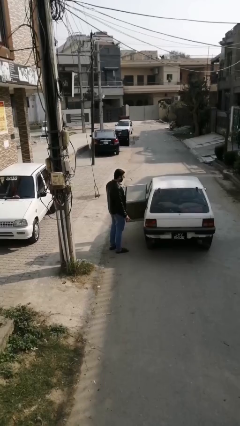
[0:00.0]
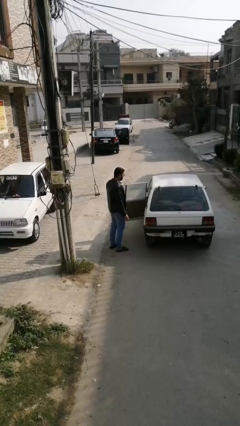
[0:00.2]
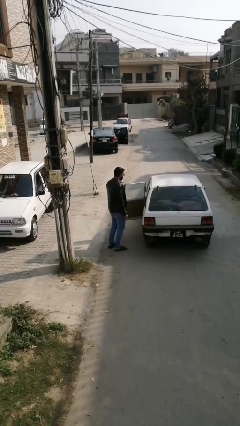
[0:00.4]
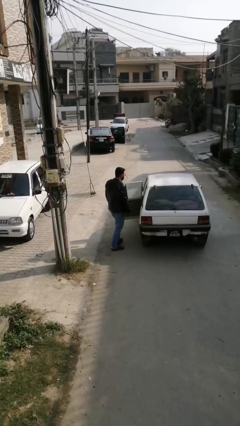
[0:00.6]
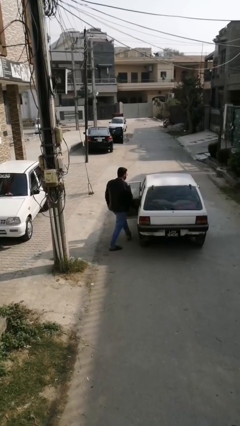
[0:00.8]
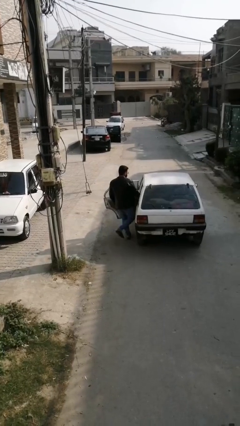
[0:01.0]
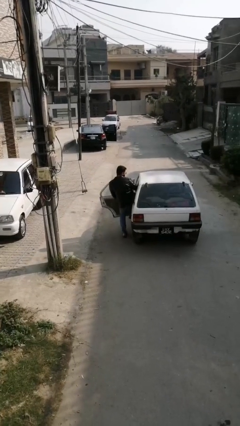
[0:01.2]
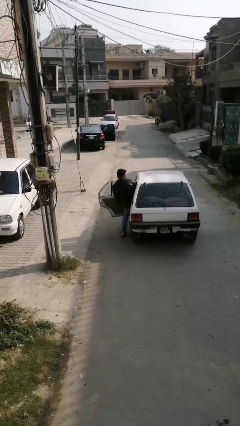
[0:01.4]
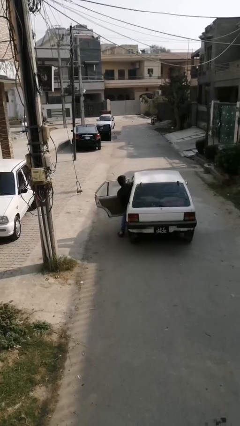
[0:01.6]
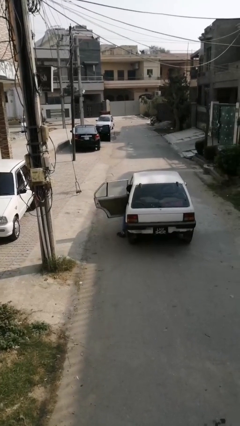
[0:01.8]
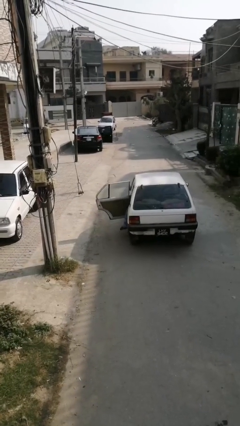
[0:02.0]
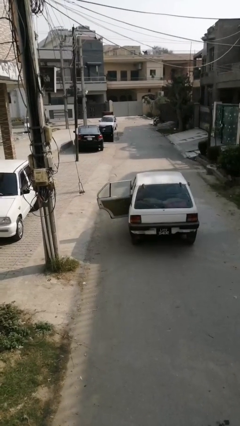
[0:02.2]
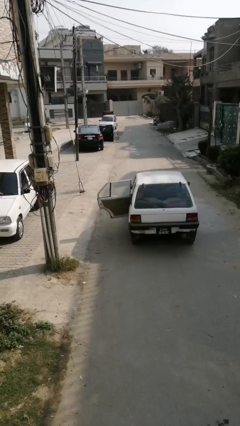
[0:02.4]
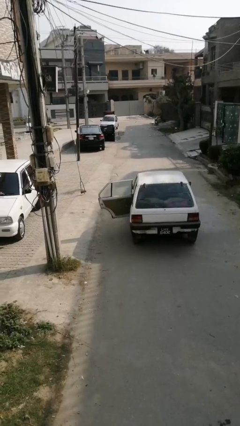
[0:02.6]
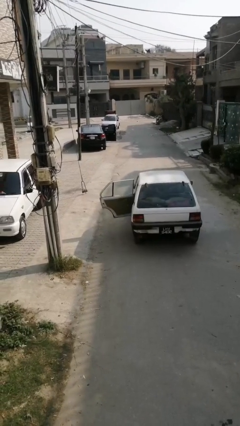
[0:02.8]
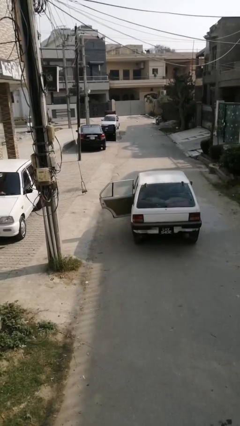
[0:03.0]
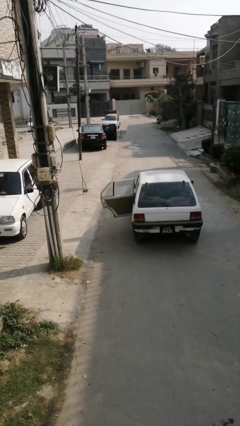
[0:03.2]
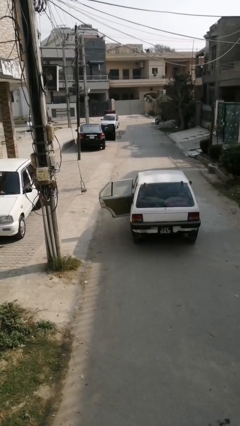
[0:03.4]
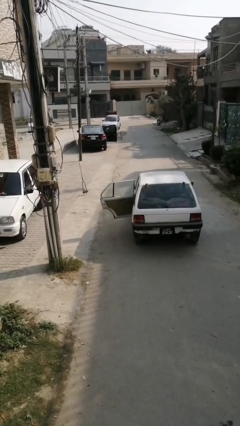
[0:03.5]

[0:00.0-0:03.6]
person enters car

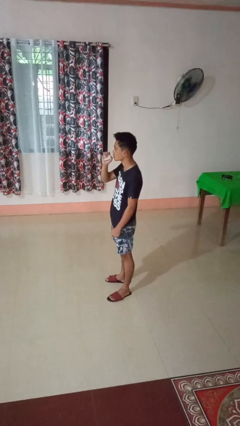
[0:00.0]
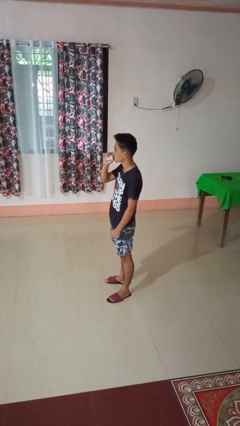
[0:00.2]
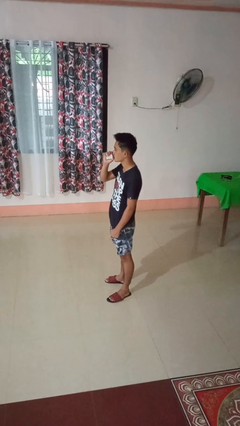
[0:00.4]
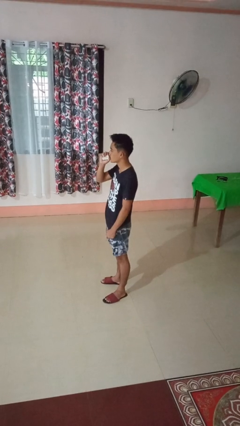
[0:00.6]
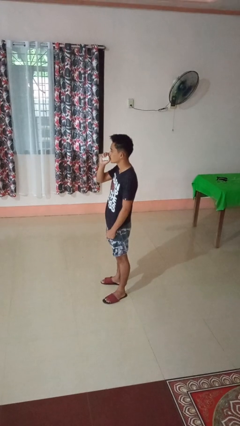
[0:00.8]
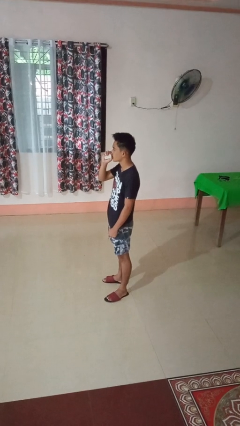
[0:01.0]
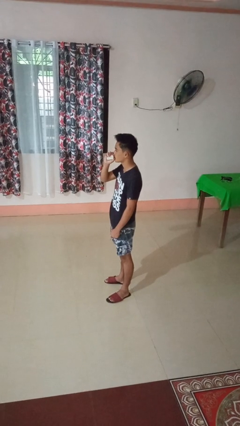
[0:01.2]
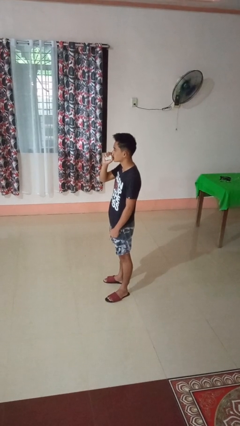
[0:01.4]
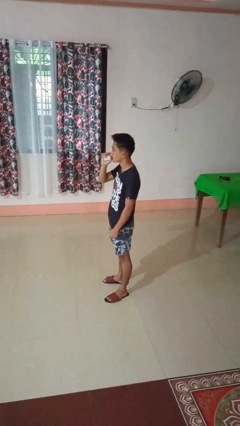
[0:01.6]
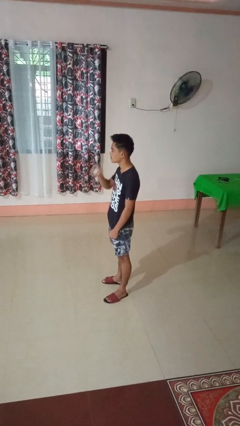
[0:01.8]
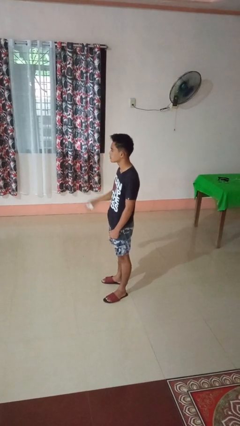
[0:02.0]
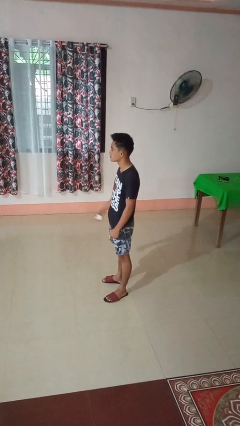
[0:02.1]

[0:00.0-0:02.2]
person vapes

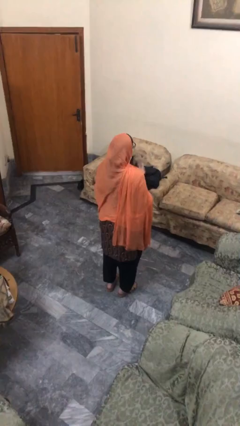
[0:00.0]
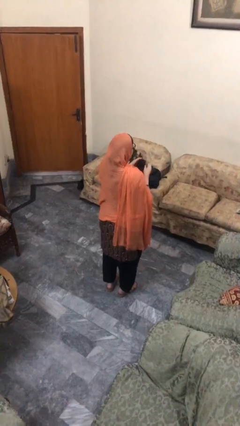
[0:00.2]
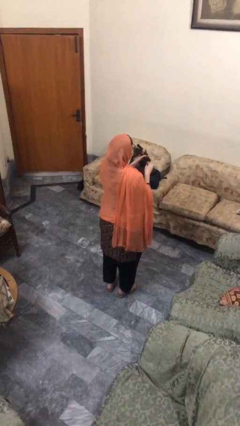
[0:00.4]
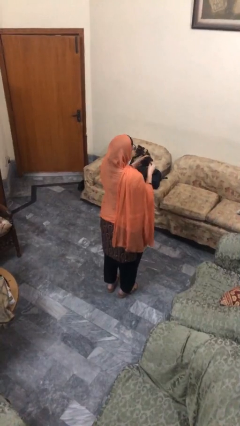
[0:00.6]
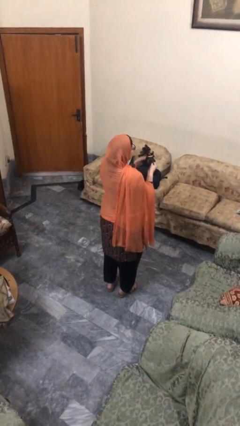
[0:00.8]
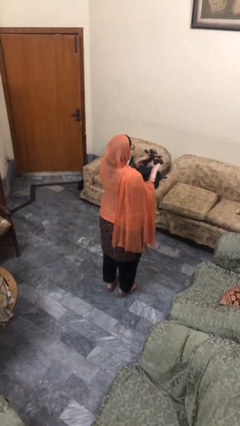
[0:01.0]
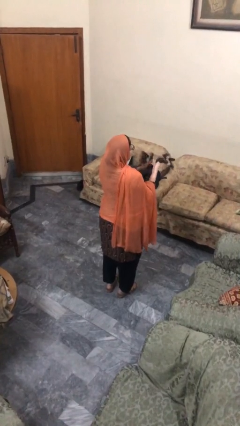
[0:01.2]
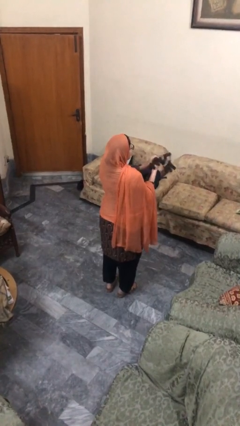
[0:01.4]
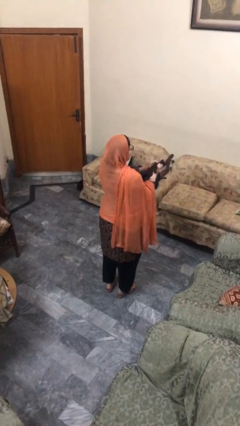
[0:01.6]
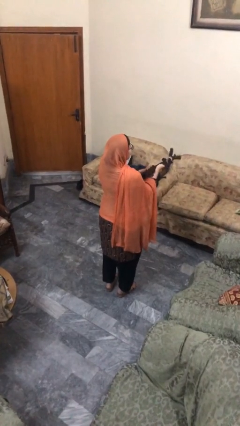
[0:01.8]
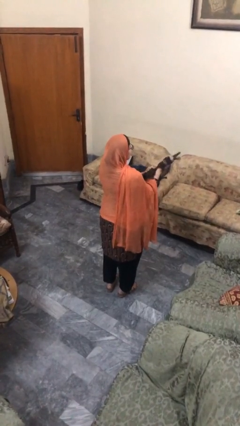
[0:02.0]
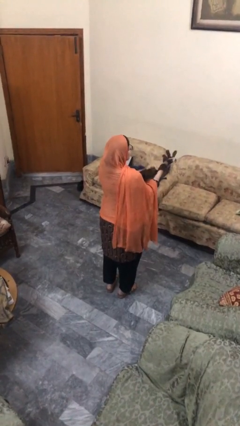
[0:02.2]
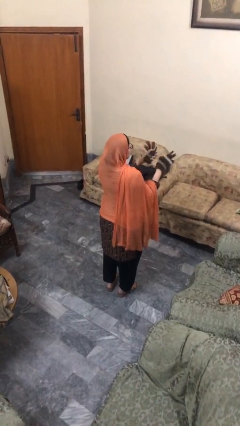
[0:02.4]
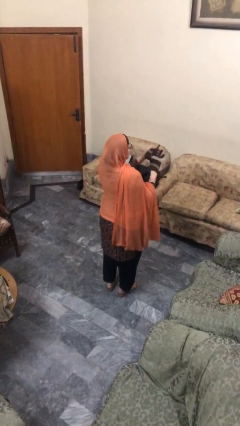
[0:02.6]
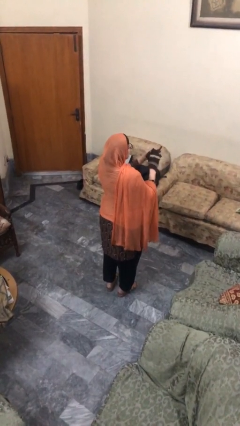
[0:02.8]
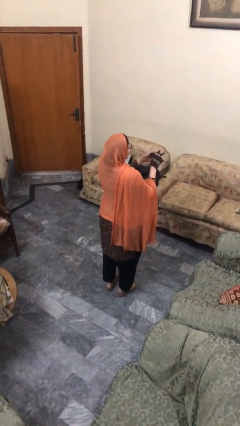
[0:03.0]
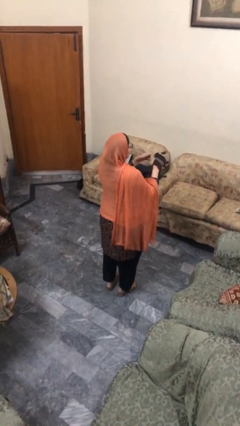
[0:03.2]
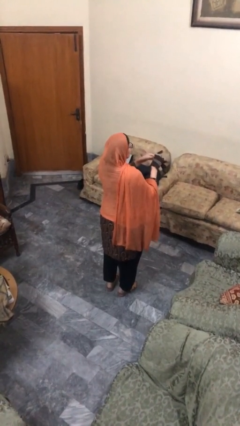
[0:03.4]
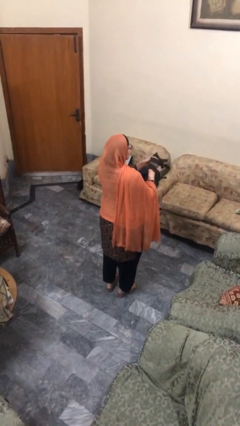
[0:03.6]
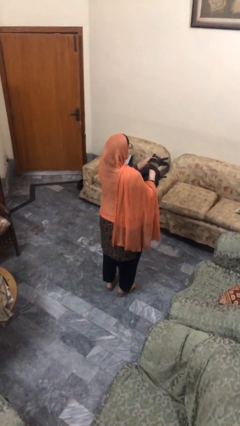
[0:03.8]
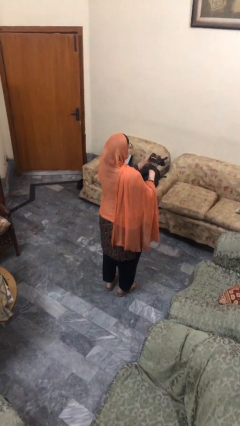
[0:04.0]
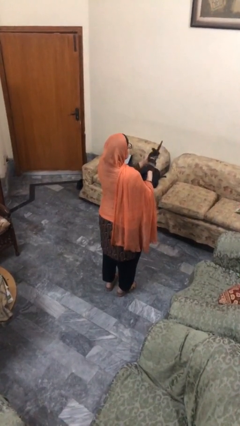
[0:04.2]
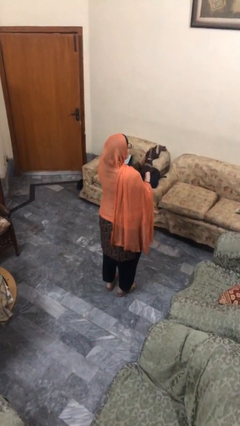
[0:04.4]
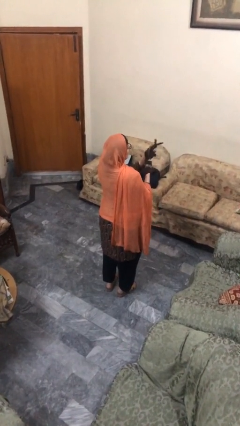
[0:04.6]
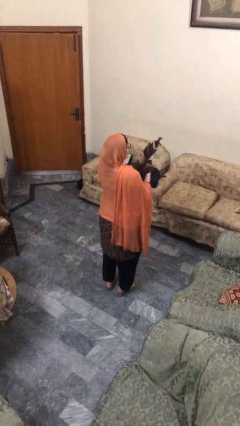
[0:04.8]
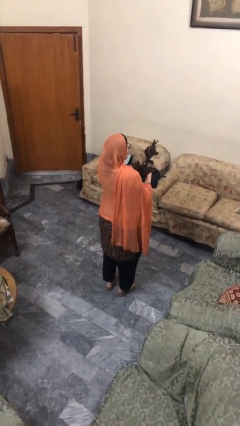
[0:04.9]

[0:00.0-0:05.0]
person puts on gloves

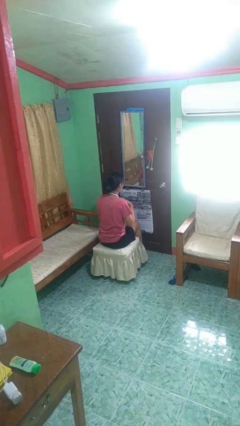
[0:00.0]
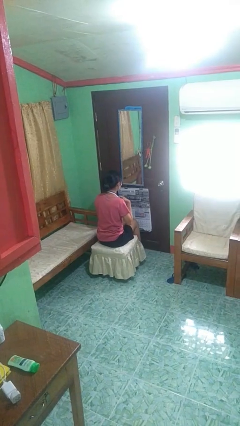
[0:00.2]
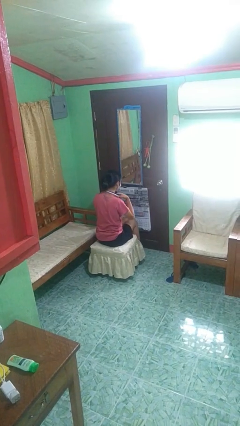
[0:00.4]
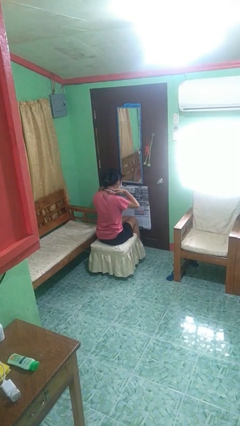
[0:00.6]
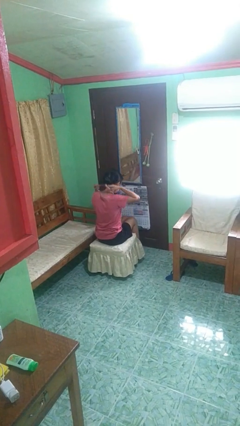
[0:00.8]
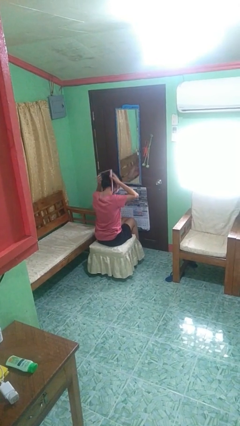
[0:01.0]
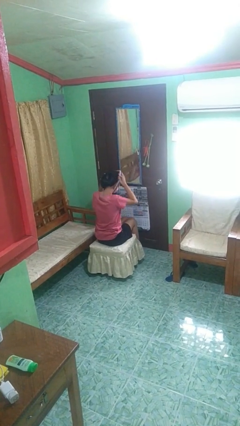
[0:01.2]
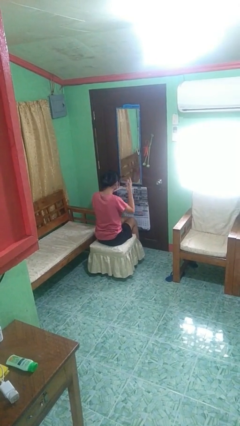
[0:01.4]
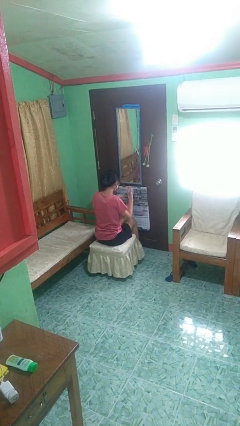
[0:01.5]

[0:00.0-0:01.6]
person takes off necklace

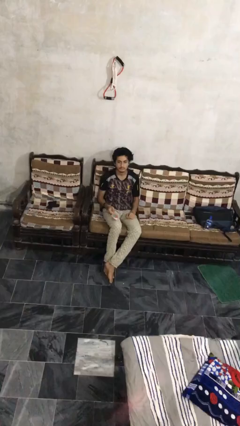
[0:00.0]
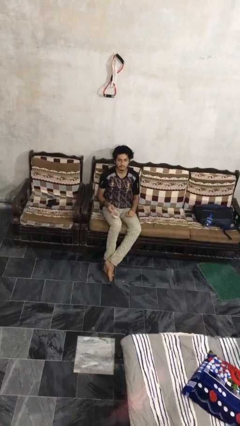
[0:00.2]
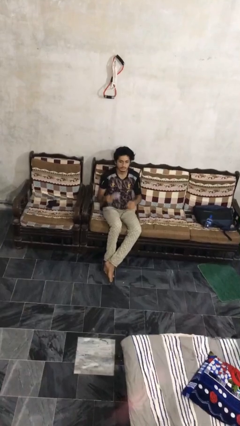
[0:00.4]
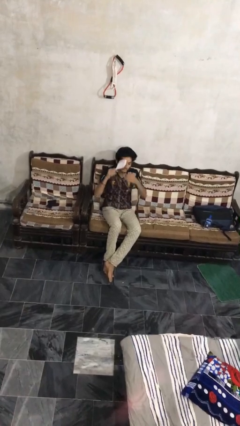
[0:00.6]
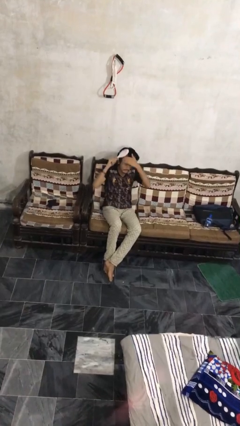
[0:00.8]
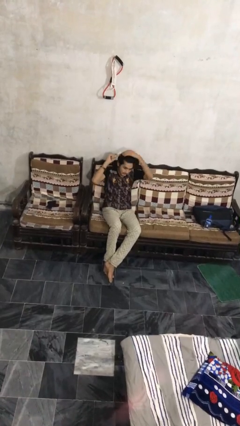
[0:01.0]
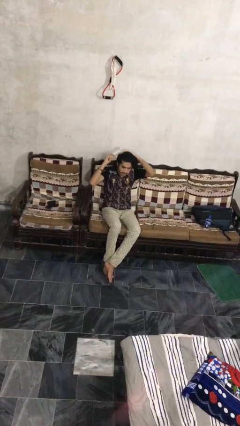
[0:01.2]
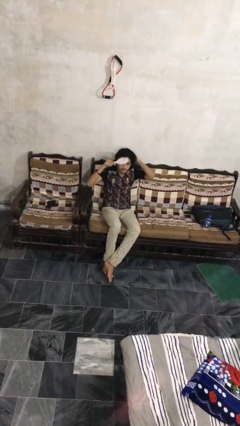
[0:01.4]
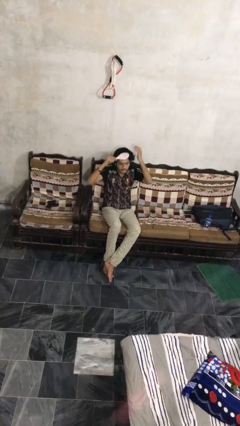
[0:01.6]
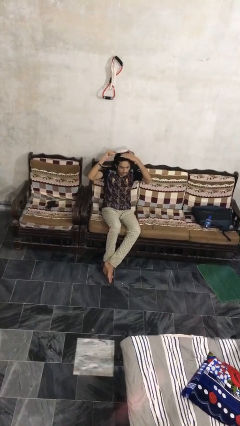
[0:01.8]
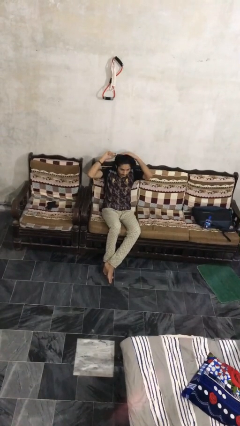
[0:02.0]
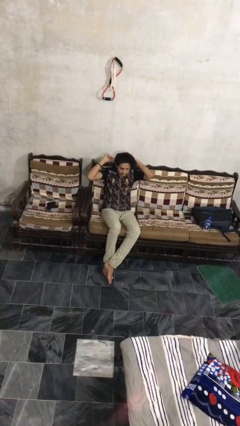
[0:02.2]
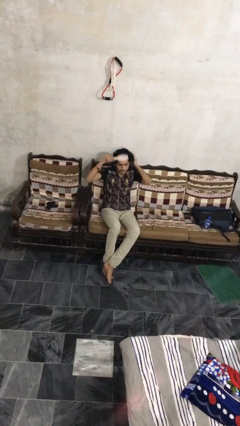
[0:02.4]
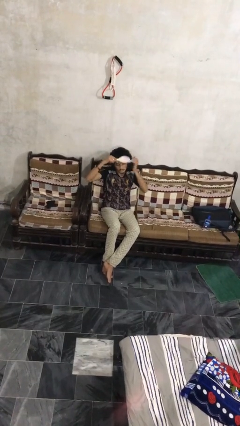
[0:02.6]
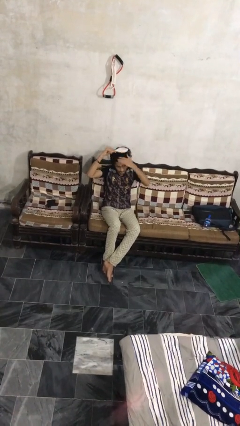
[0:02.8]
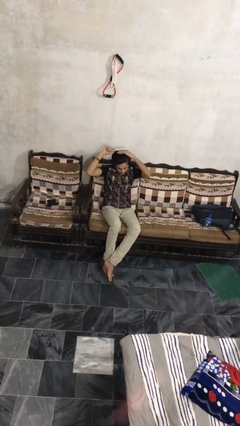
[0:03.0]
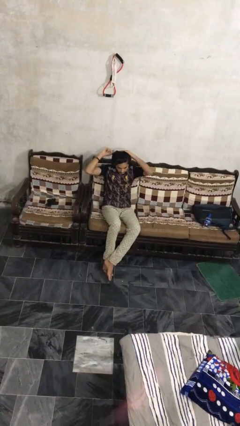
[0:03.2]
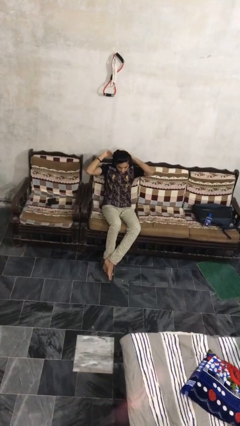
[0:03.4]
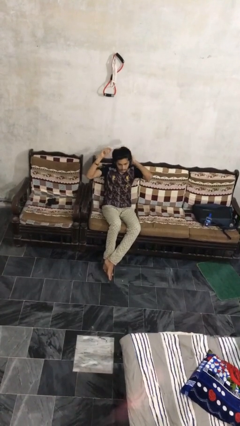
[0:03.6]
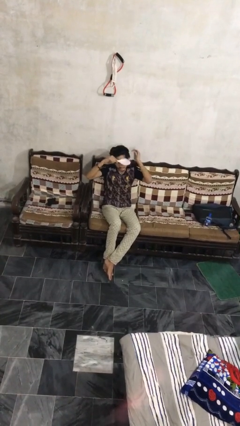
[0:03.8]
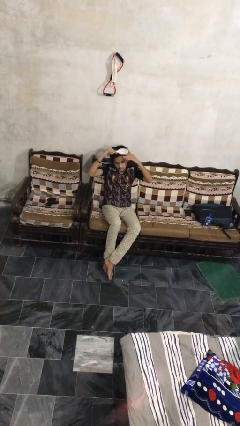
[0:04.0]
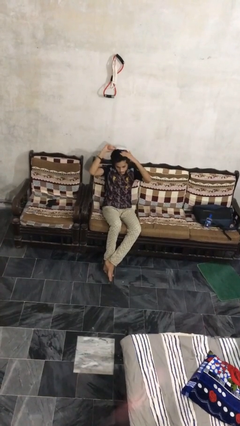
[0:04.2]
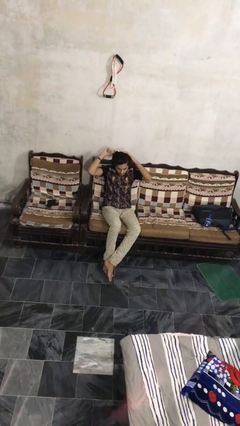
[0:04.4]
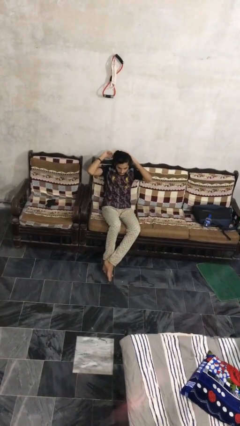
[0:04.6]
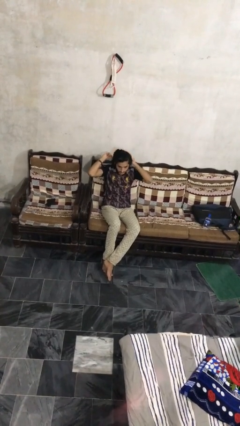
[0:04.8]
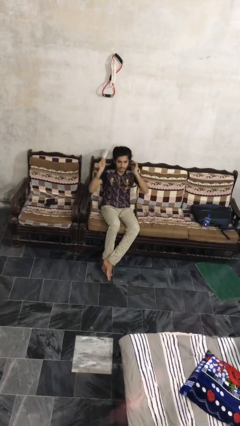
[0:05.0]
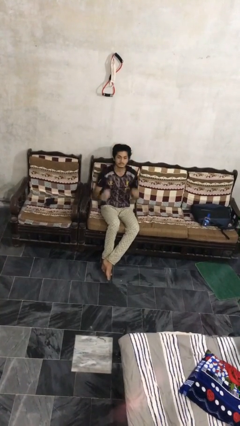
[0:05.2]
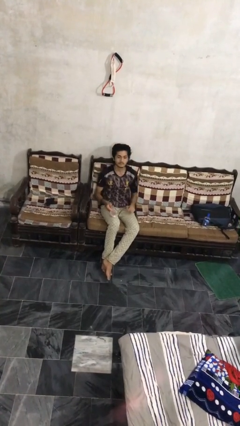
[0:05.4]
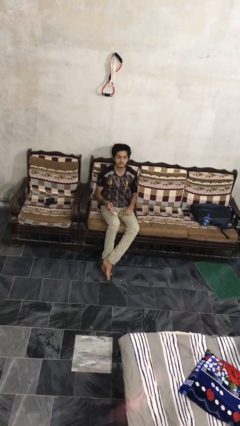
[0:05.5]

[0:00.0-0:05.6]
person brushes hair
